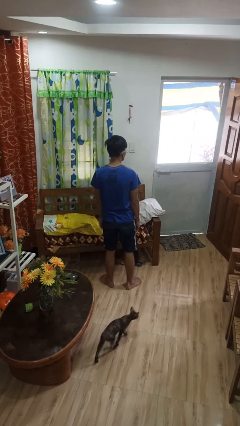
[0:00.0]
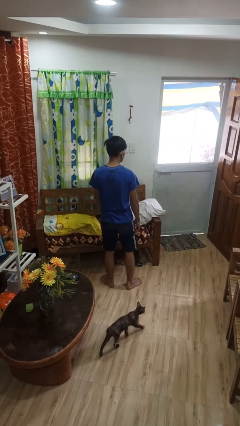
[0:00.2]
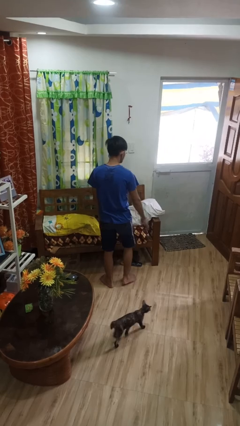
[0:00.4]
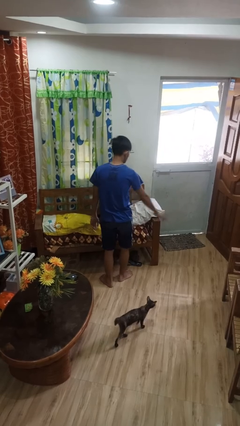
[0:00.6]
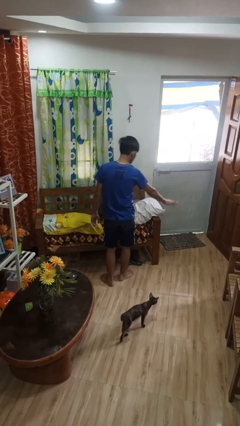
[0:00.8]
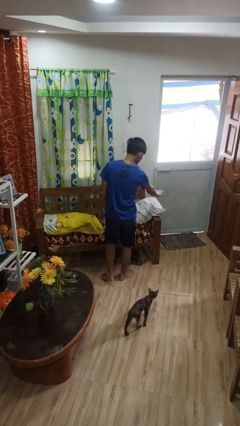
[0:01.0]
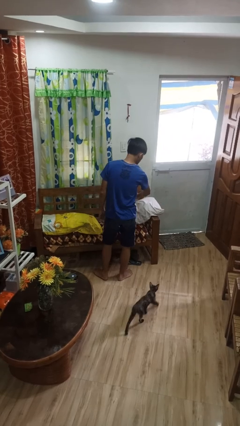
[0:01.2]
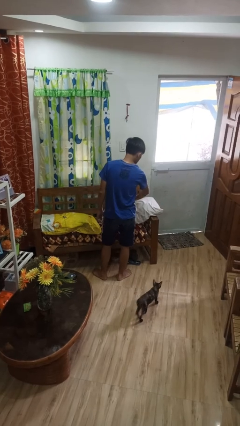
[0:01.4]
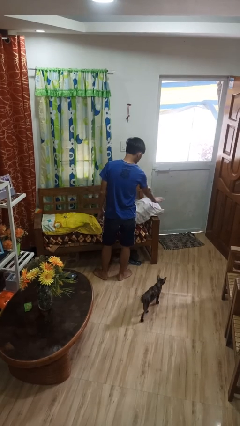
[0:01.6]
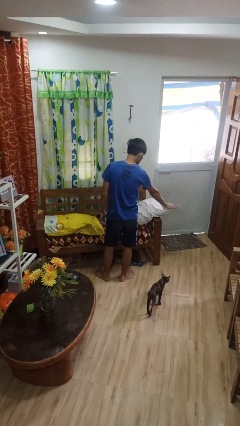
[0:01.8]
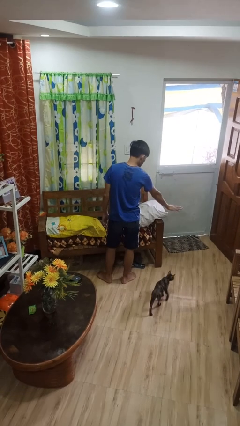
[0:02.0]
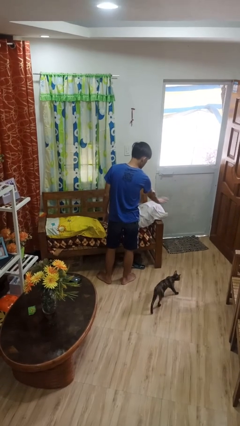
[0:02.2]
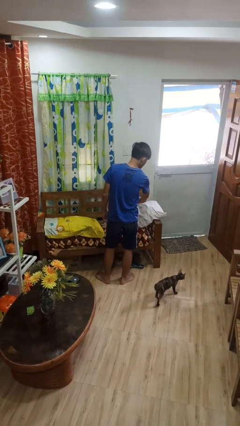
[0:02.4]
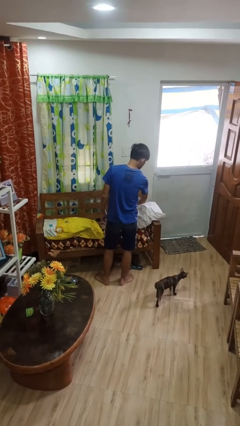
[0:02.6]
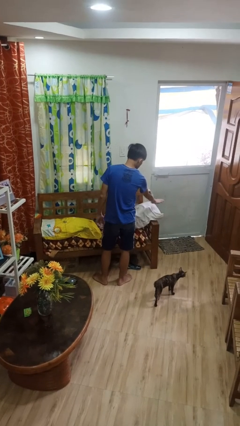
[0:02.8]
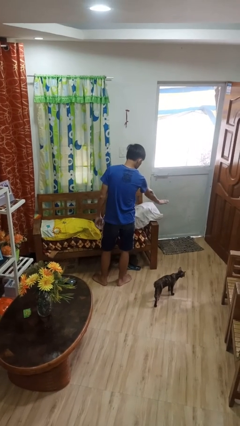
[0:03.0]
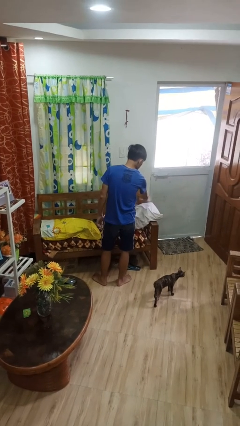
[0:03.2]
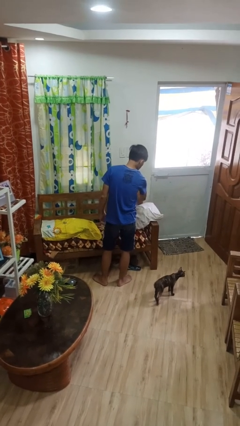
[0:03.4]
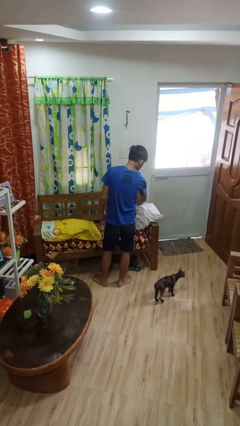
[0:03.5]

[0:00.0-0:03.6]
person waves hand over object

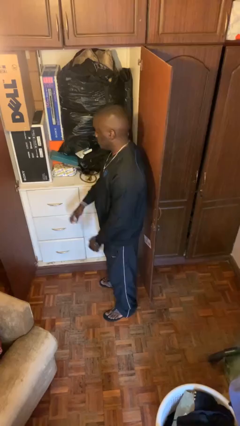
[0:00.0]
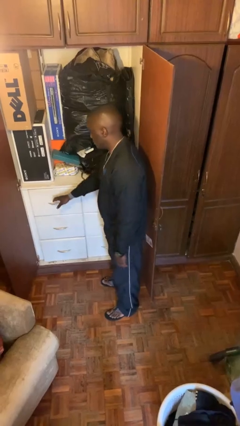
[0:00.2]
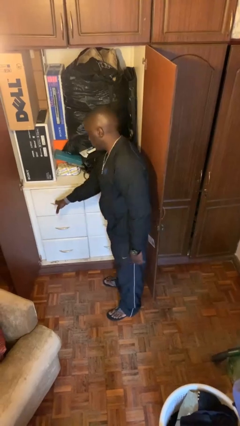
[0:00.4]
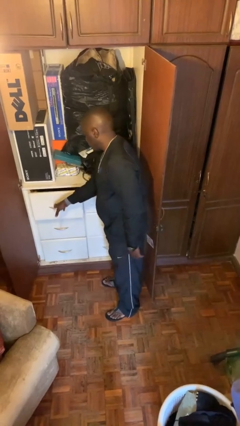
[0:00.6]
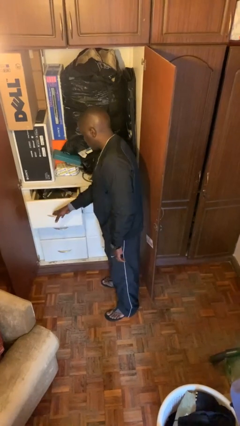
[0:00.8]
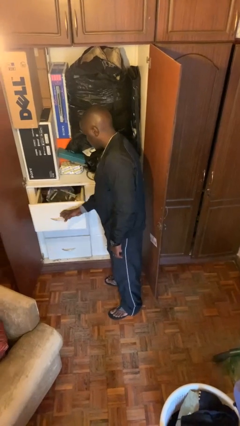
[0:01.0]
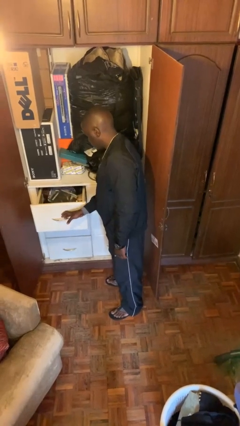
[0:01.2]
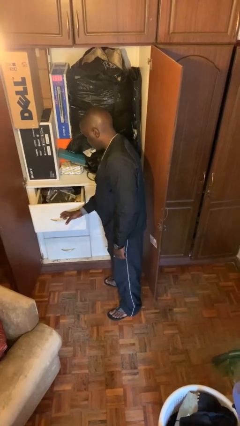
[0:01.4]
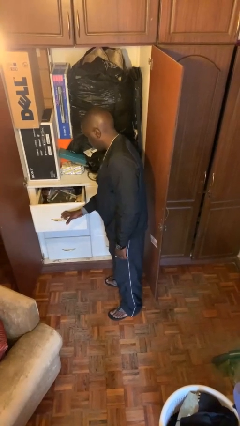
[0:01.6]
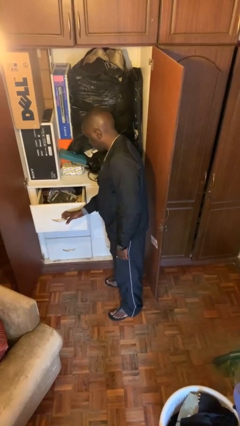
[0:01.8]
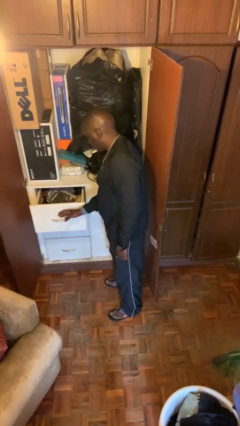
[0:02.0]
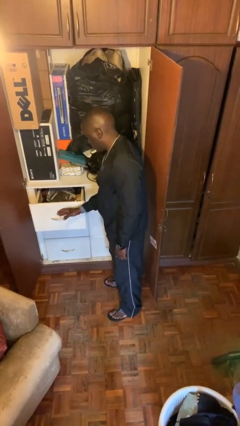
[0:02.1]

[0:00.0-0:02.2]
person opens dresser drawer

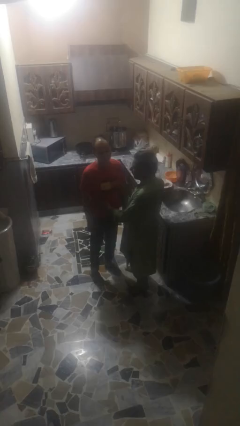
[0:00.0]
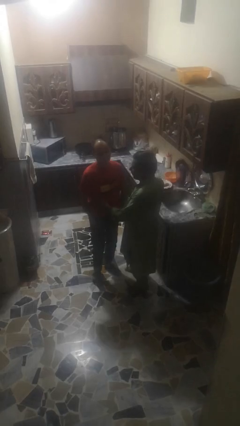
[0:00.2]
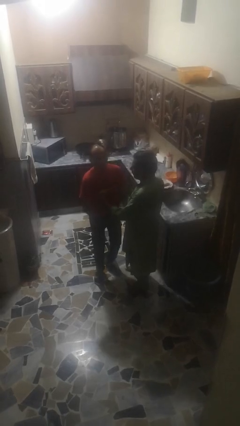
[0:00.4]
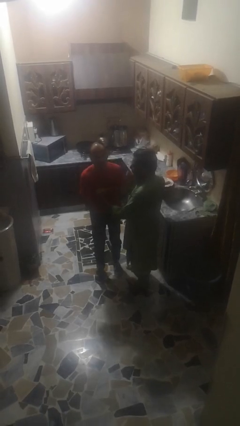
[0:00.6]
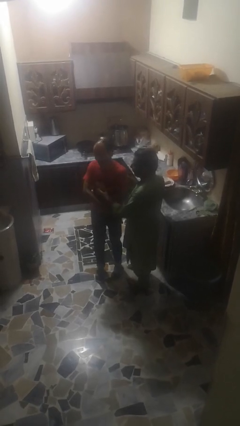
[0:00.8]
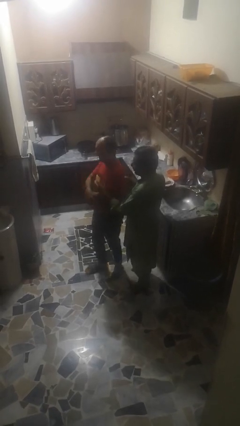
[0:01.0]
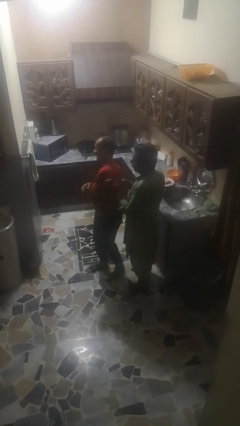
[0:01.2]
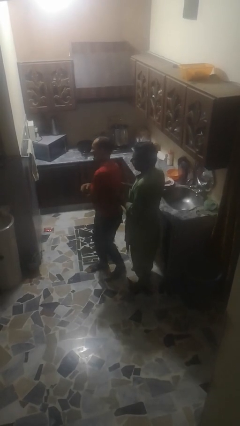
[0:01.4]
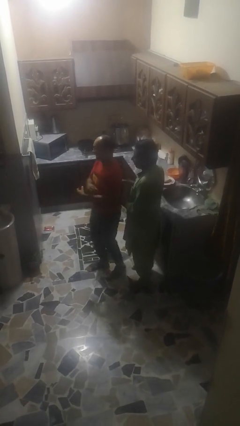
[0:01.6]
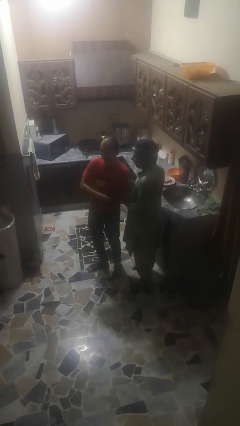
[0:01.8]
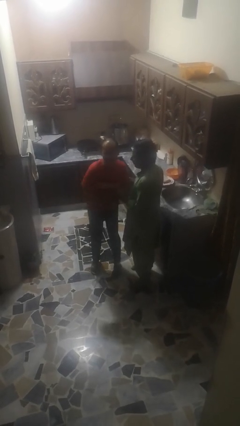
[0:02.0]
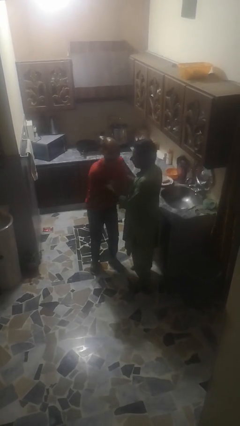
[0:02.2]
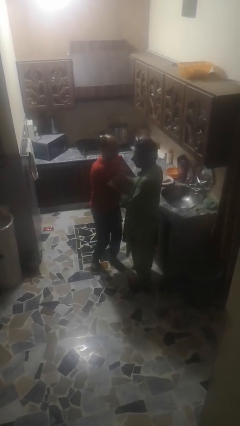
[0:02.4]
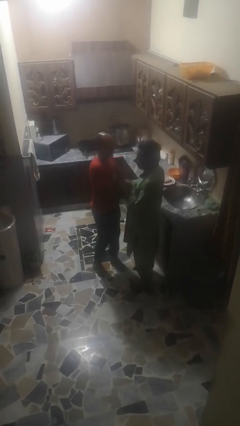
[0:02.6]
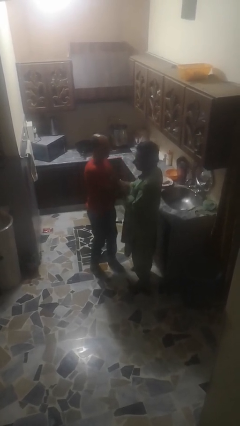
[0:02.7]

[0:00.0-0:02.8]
person tickles person

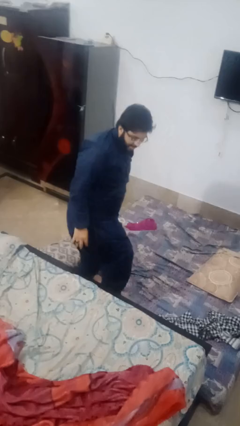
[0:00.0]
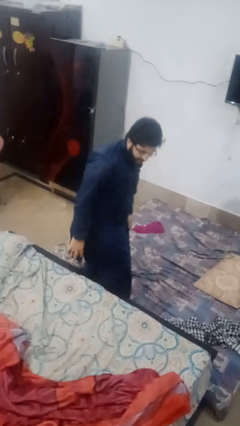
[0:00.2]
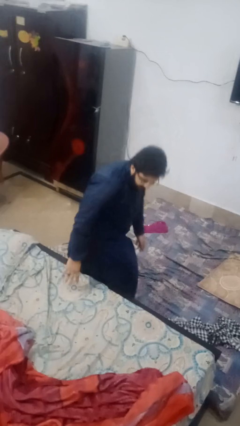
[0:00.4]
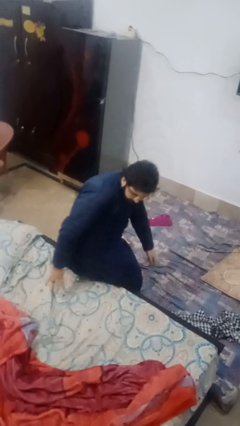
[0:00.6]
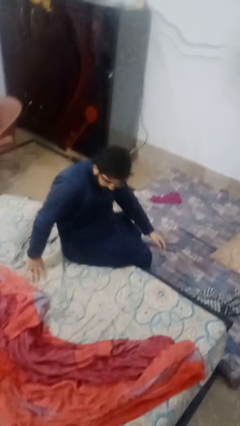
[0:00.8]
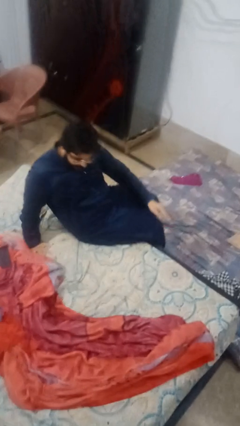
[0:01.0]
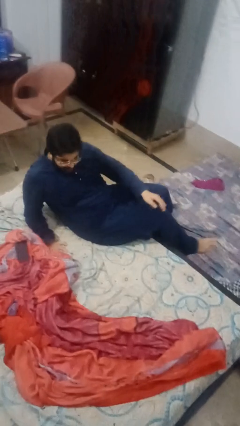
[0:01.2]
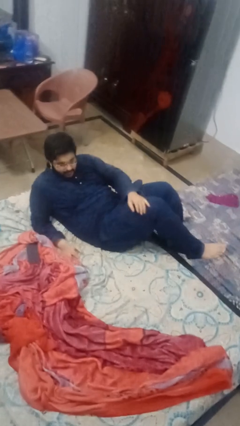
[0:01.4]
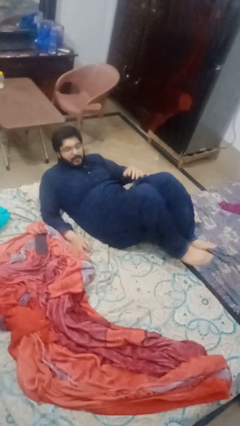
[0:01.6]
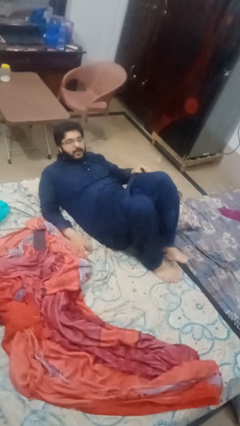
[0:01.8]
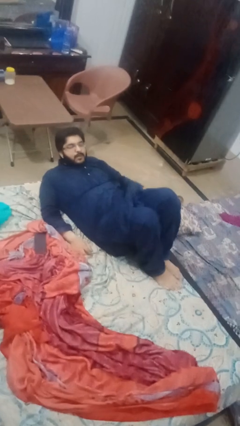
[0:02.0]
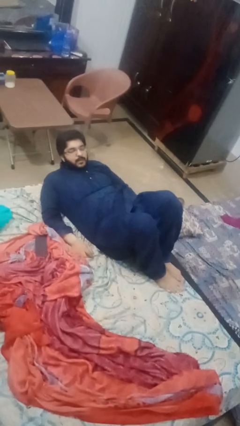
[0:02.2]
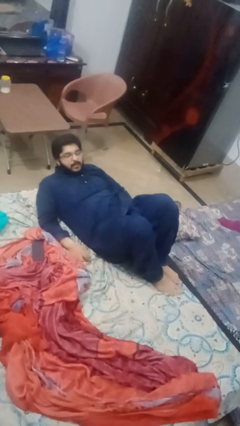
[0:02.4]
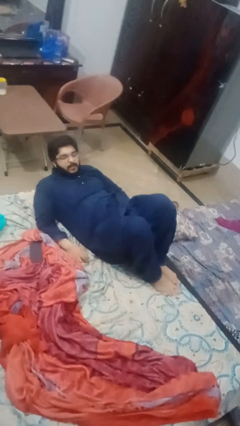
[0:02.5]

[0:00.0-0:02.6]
person lies down on bed

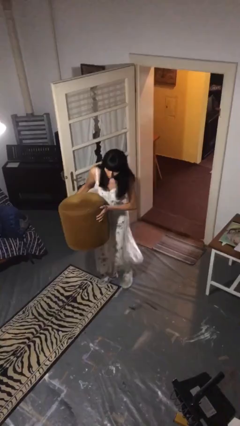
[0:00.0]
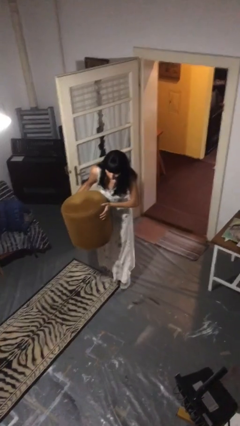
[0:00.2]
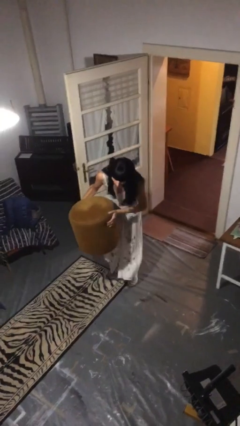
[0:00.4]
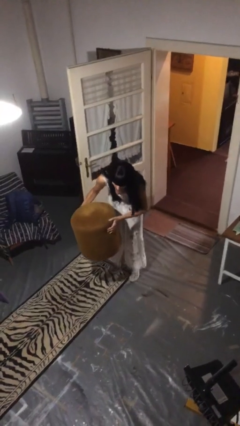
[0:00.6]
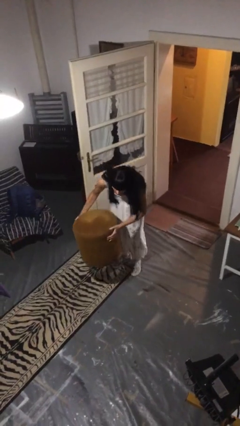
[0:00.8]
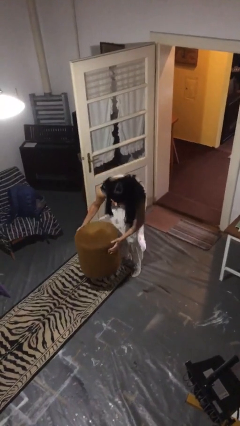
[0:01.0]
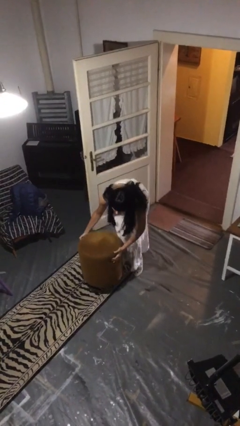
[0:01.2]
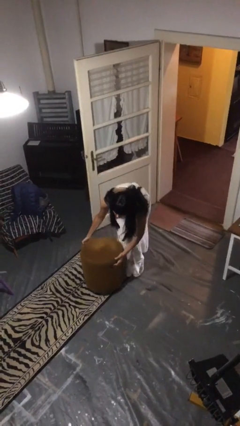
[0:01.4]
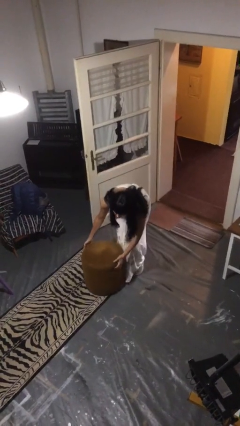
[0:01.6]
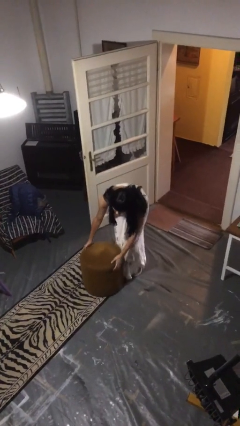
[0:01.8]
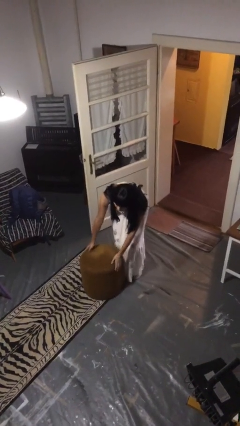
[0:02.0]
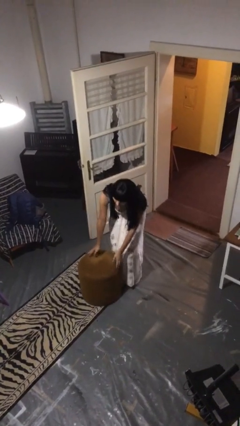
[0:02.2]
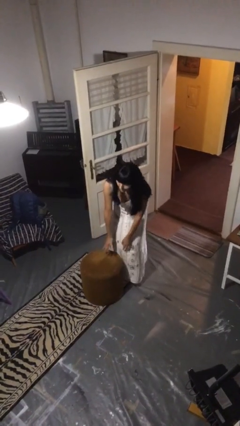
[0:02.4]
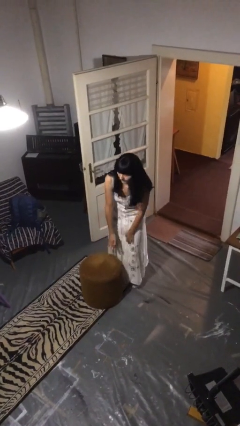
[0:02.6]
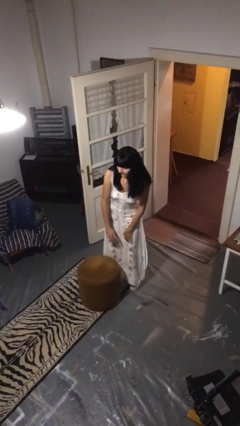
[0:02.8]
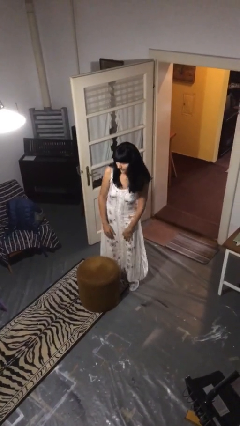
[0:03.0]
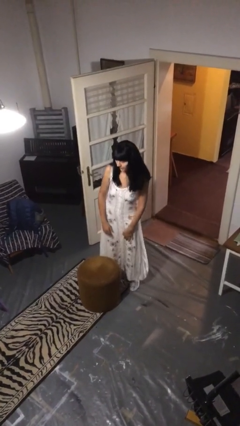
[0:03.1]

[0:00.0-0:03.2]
person puts down object on floor

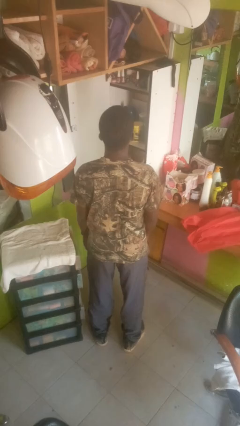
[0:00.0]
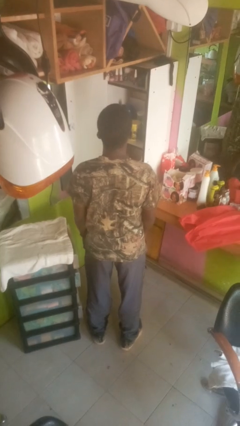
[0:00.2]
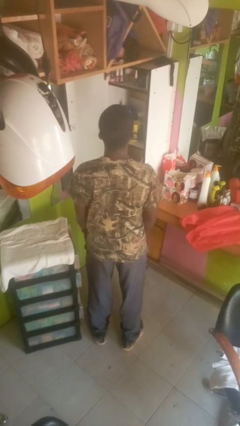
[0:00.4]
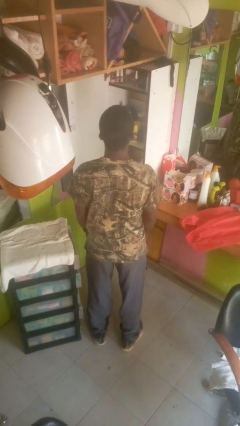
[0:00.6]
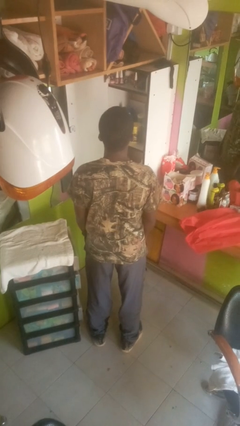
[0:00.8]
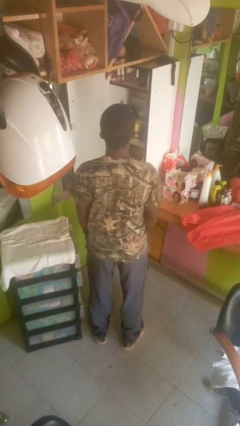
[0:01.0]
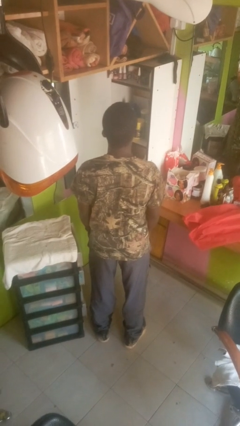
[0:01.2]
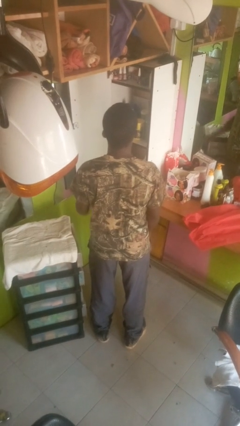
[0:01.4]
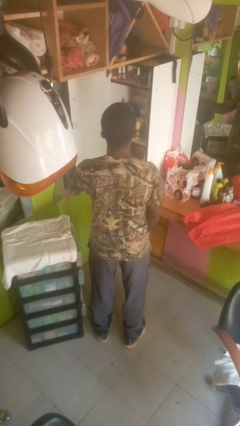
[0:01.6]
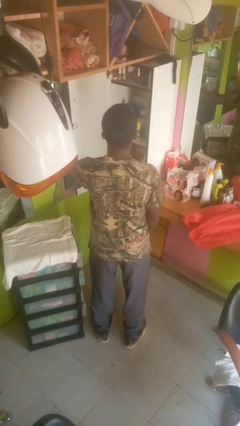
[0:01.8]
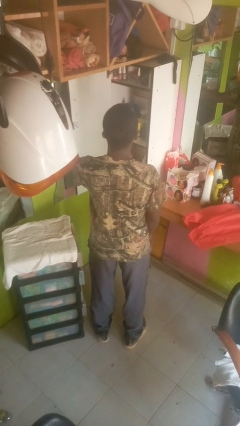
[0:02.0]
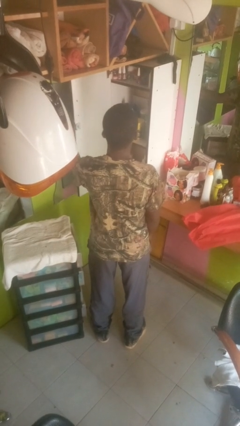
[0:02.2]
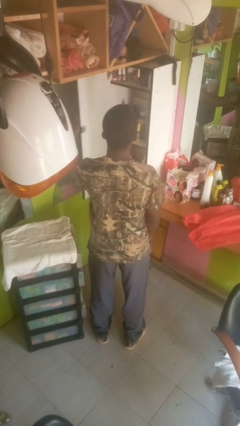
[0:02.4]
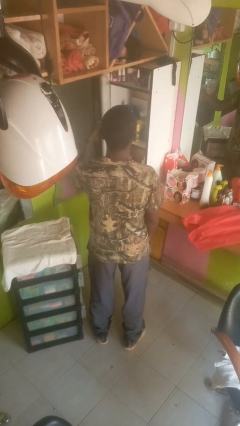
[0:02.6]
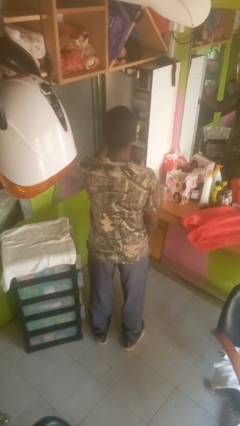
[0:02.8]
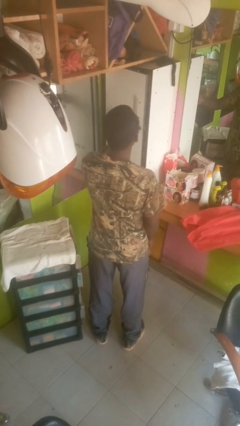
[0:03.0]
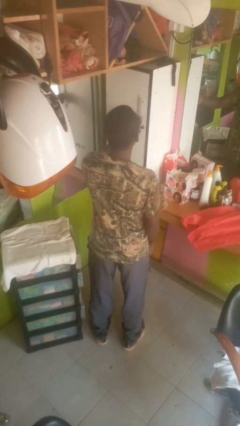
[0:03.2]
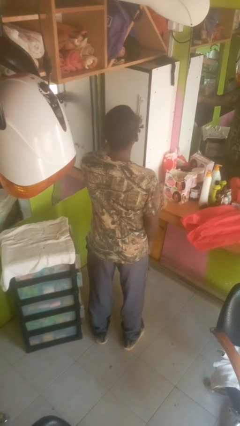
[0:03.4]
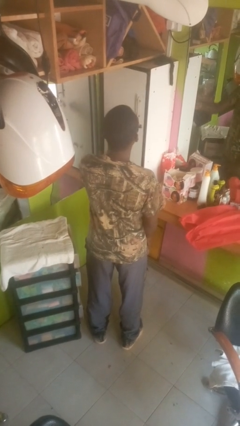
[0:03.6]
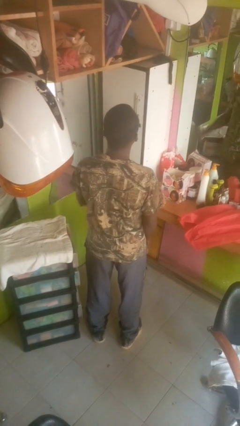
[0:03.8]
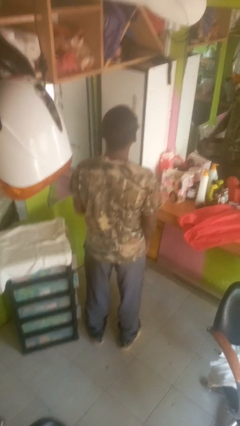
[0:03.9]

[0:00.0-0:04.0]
person closes closet door
